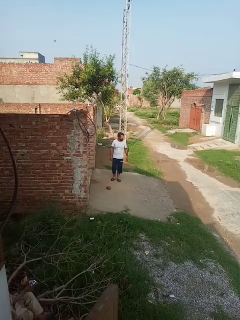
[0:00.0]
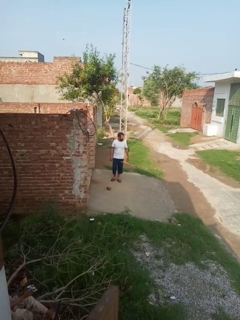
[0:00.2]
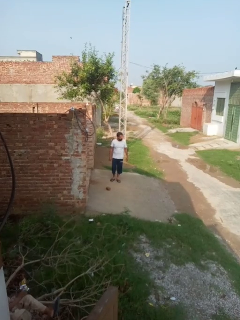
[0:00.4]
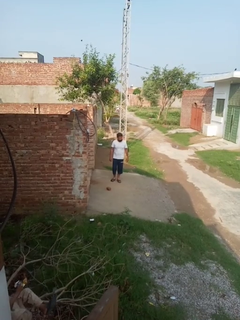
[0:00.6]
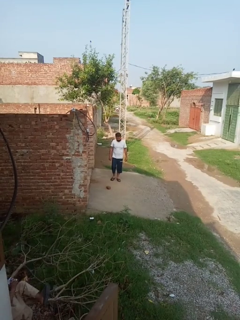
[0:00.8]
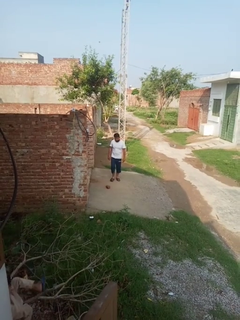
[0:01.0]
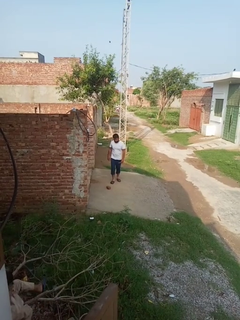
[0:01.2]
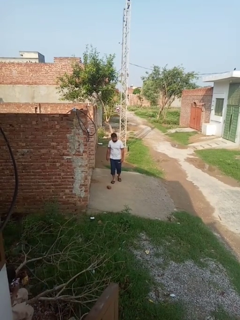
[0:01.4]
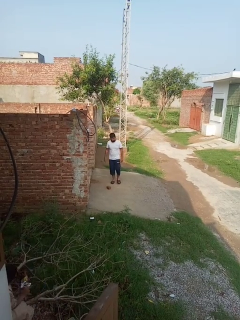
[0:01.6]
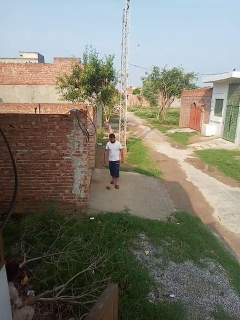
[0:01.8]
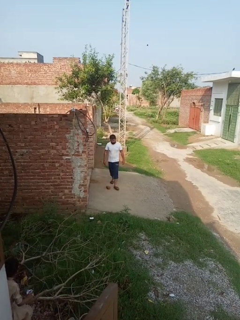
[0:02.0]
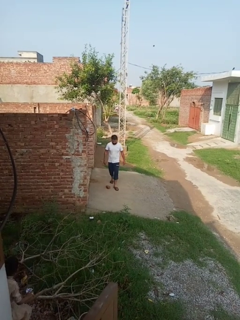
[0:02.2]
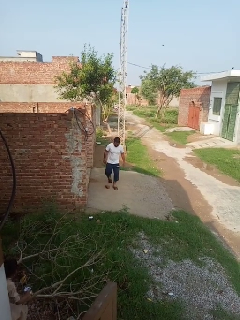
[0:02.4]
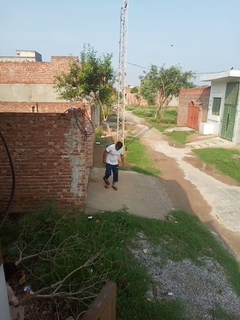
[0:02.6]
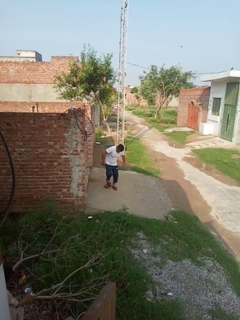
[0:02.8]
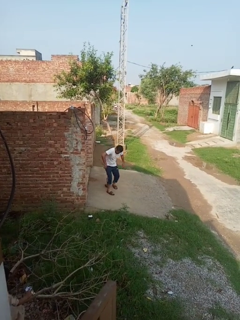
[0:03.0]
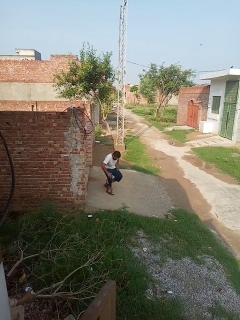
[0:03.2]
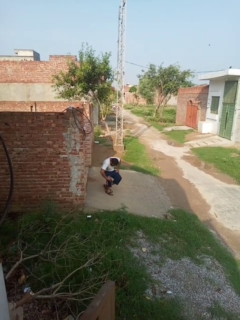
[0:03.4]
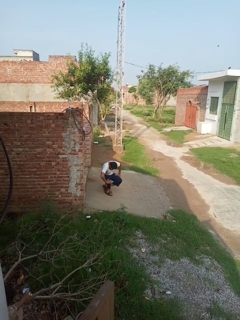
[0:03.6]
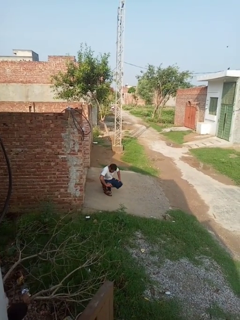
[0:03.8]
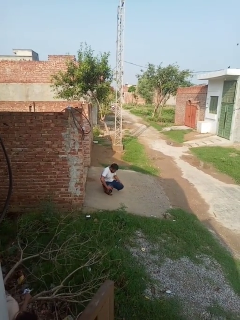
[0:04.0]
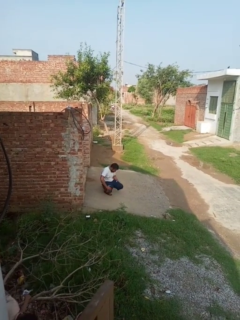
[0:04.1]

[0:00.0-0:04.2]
person trips on object on floor

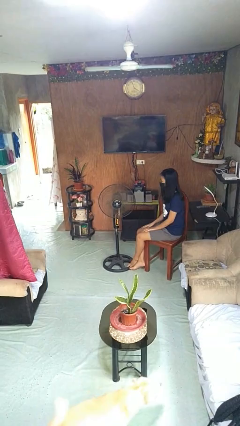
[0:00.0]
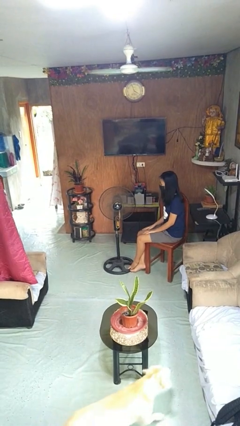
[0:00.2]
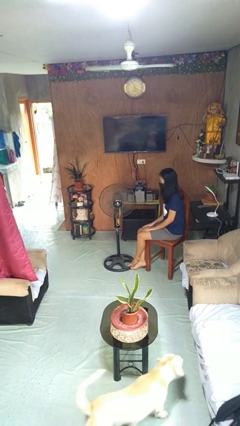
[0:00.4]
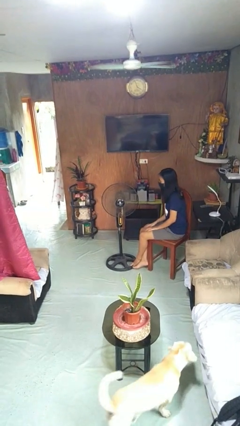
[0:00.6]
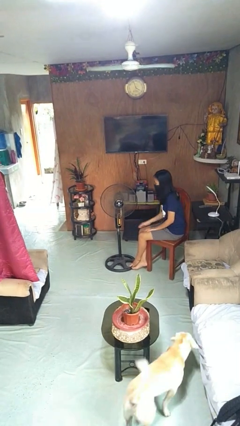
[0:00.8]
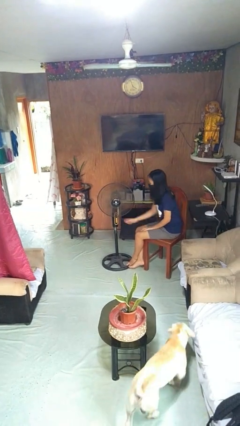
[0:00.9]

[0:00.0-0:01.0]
person turns on fan

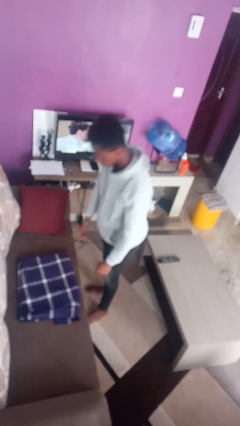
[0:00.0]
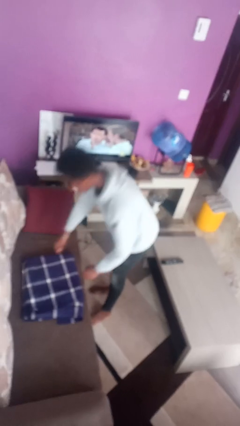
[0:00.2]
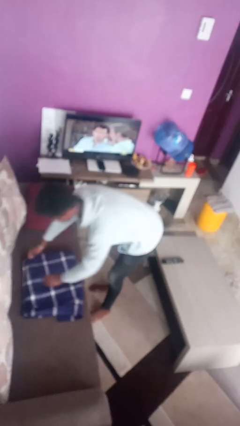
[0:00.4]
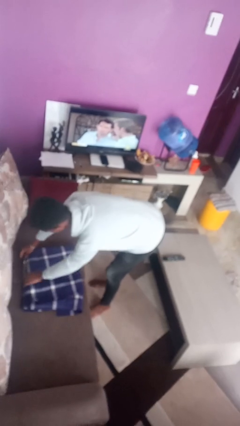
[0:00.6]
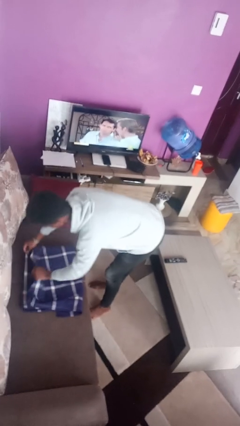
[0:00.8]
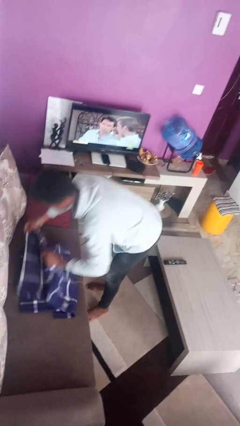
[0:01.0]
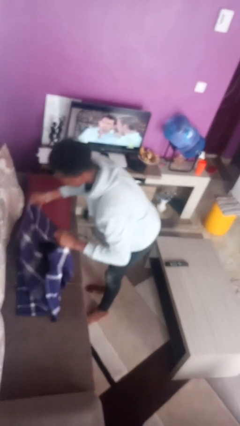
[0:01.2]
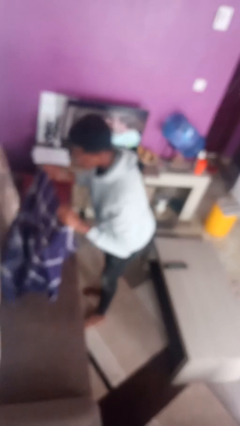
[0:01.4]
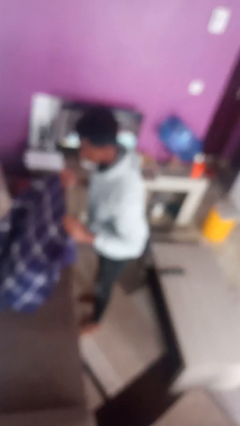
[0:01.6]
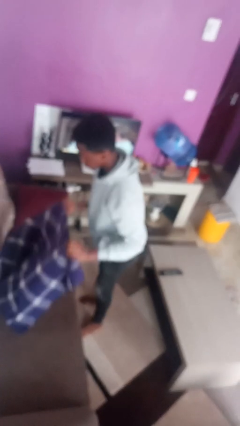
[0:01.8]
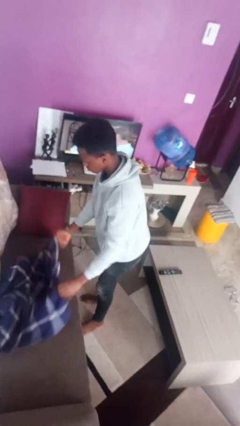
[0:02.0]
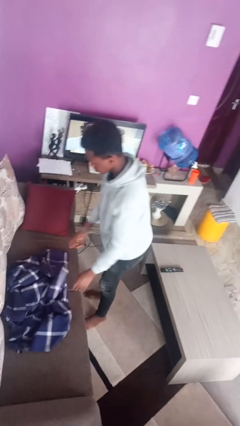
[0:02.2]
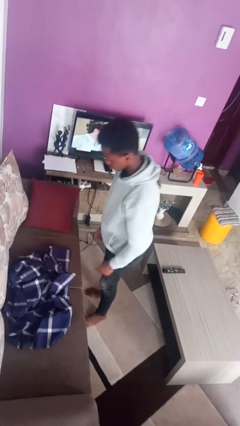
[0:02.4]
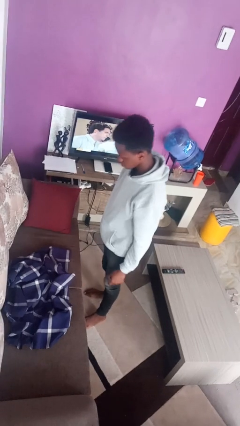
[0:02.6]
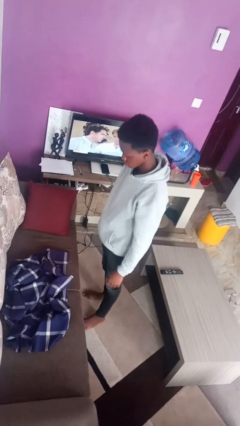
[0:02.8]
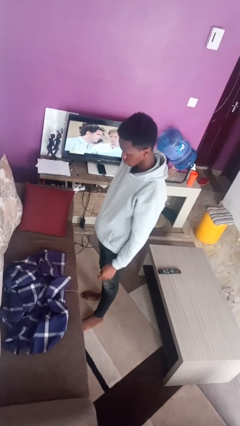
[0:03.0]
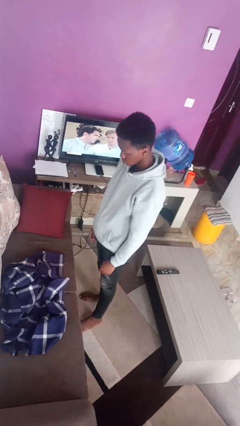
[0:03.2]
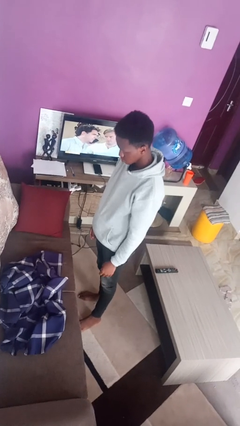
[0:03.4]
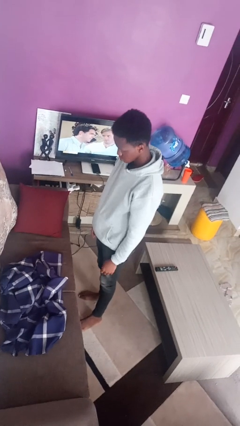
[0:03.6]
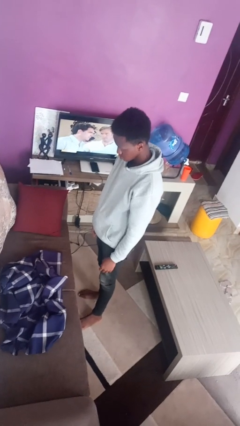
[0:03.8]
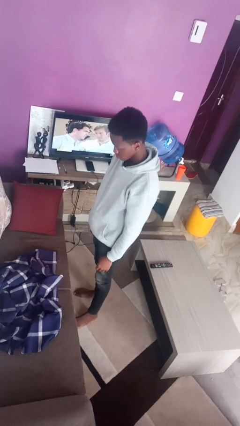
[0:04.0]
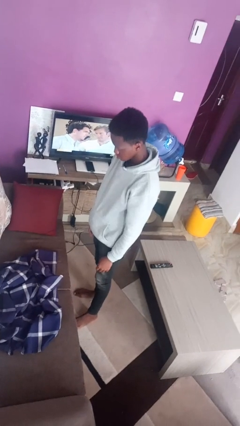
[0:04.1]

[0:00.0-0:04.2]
person unfolds blanket

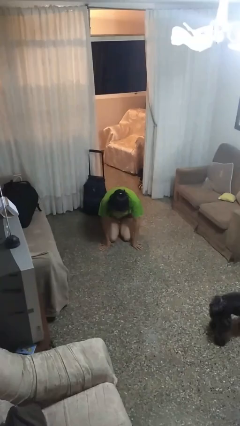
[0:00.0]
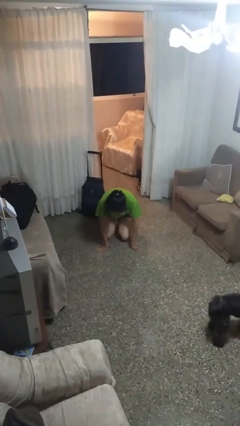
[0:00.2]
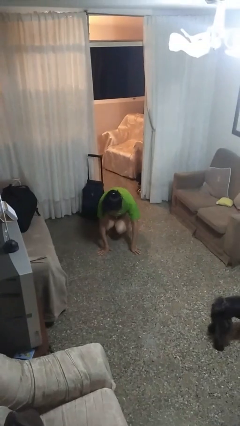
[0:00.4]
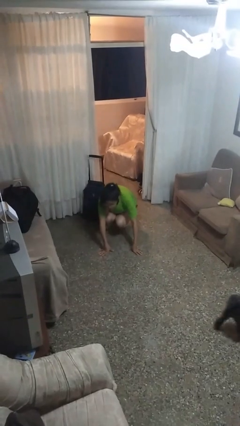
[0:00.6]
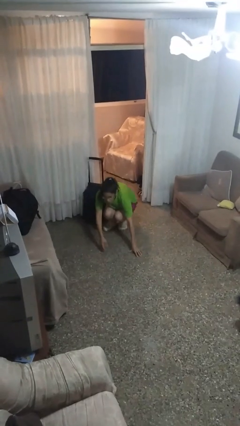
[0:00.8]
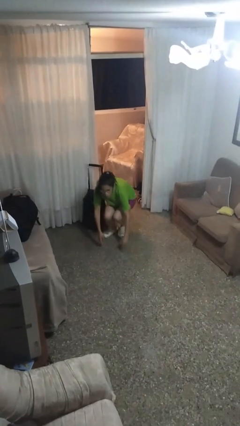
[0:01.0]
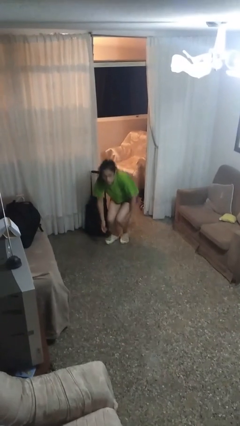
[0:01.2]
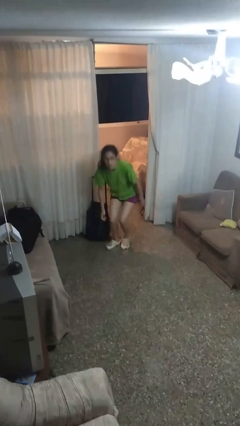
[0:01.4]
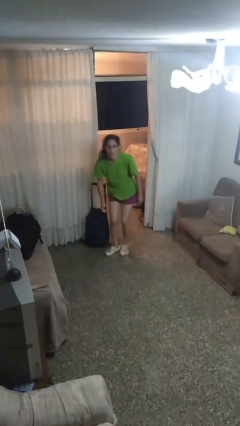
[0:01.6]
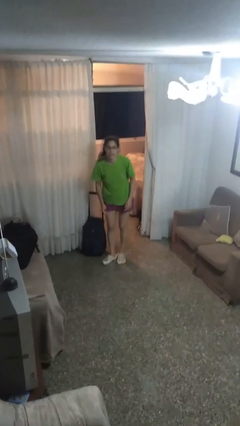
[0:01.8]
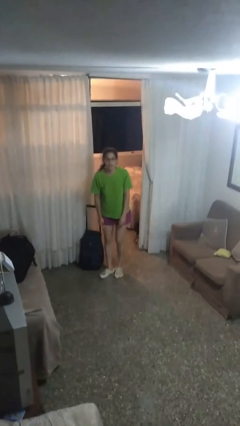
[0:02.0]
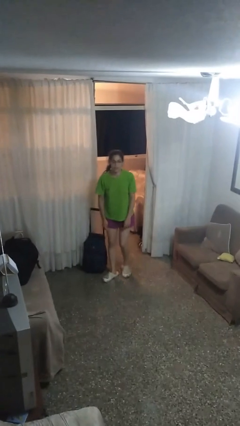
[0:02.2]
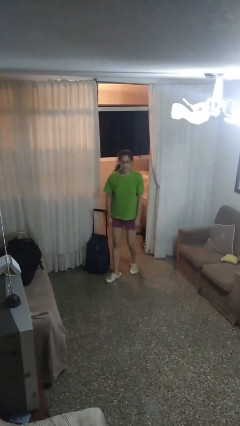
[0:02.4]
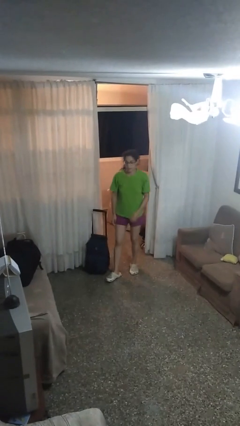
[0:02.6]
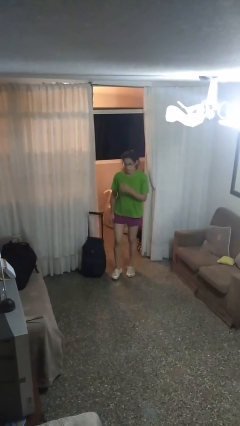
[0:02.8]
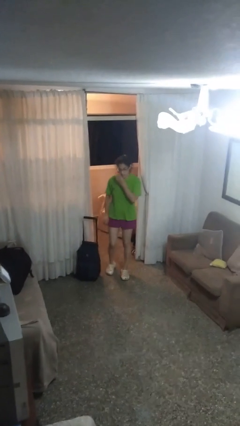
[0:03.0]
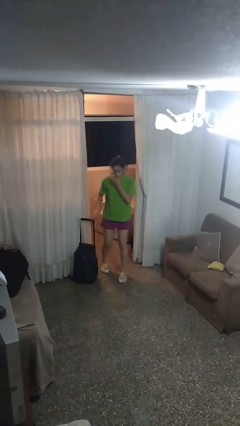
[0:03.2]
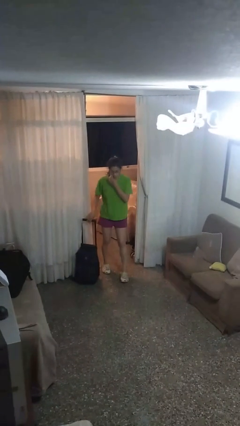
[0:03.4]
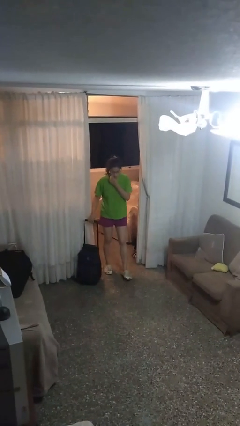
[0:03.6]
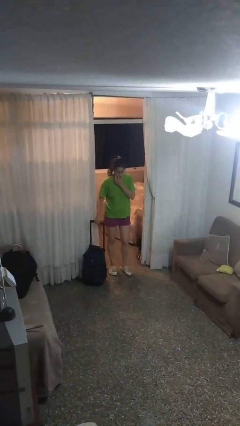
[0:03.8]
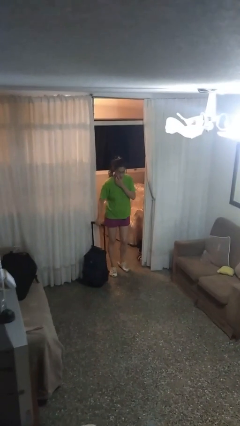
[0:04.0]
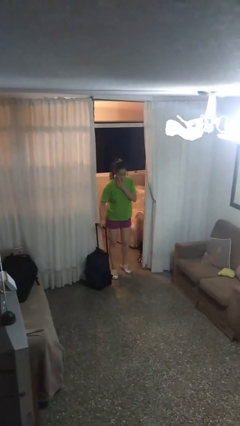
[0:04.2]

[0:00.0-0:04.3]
person stands up from floor

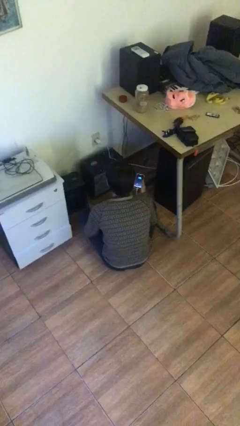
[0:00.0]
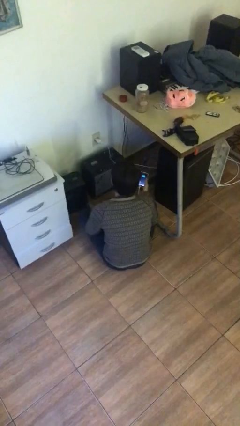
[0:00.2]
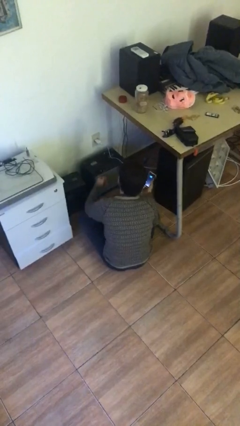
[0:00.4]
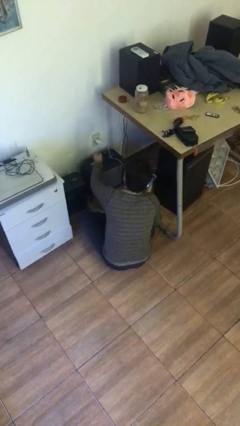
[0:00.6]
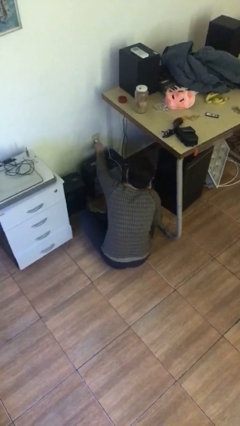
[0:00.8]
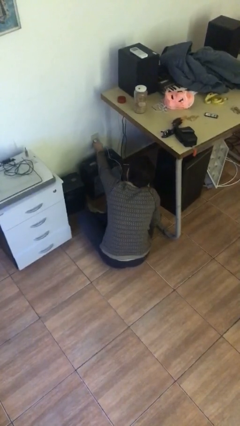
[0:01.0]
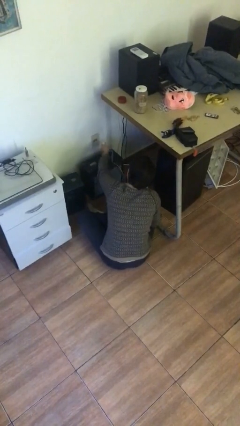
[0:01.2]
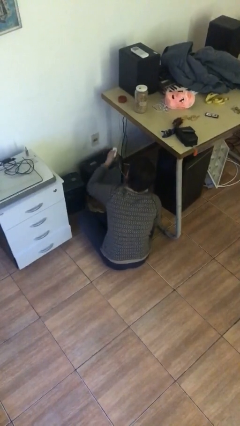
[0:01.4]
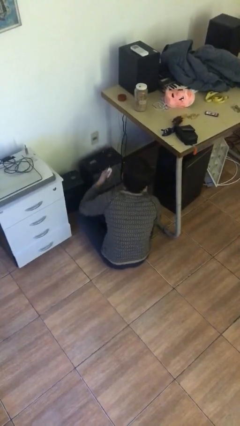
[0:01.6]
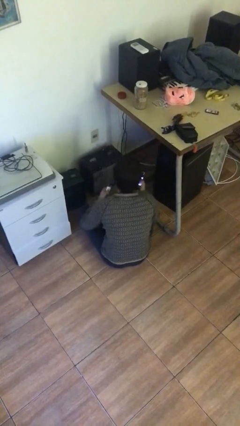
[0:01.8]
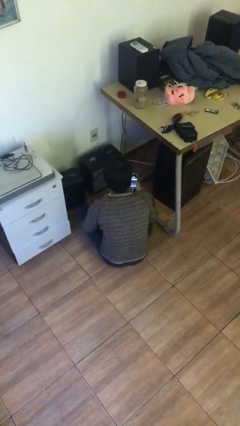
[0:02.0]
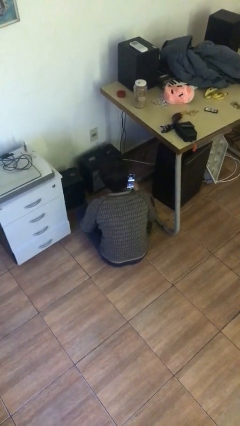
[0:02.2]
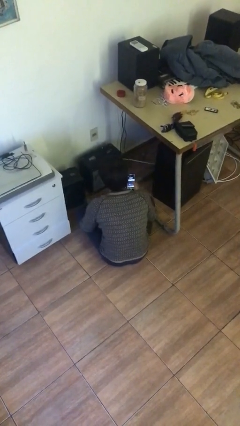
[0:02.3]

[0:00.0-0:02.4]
person unplugs from electrical socket

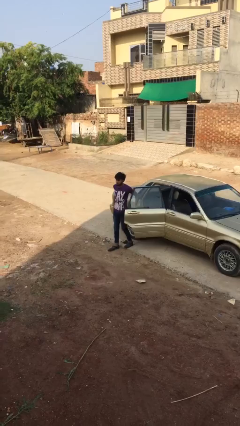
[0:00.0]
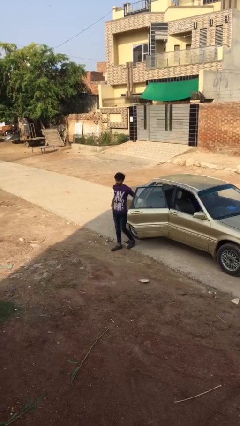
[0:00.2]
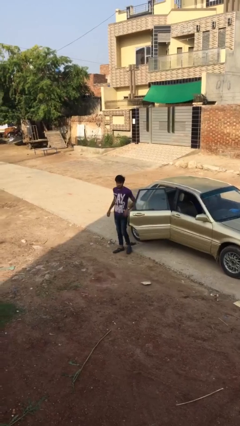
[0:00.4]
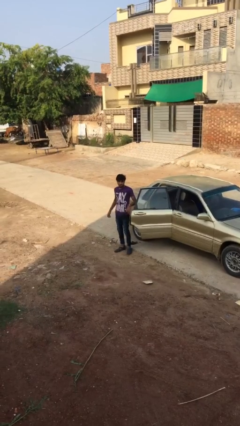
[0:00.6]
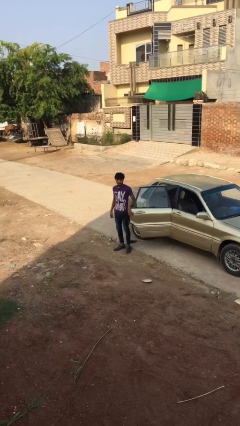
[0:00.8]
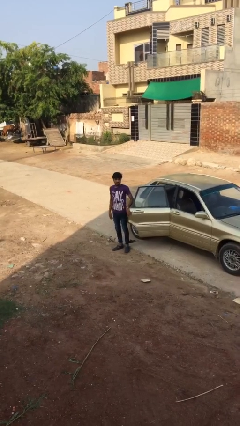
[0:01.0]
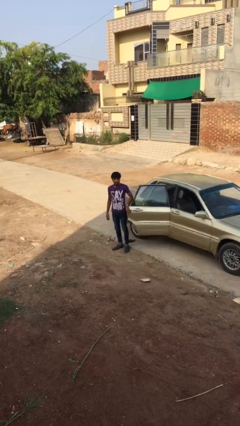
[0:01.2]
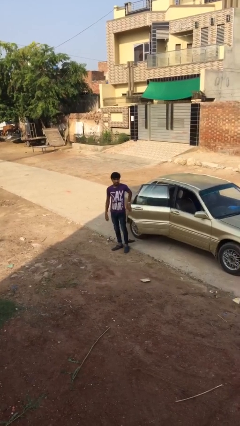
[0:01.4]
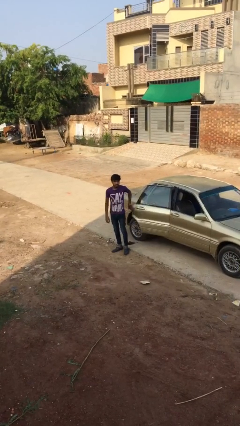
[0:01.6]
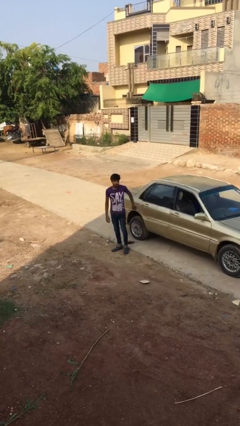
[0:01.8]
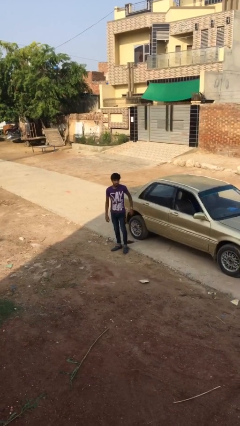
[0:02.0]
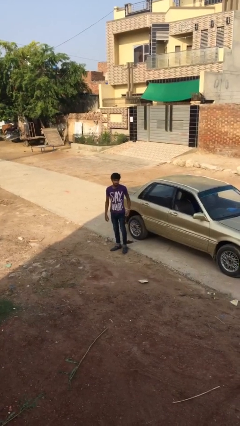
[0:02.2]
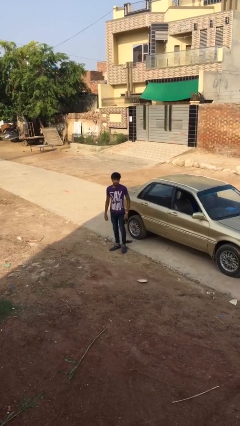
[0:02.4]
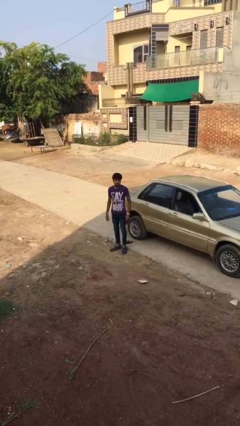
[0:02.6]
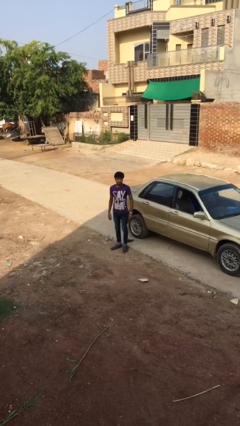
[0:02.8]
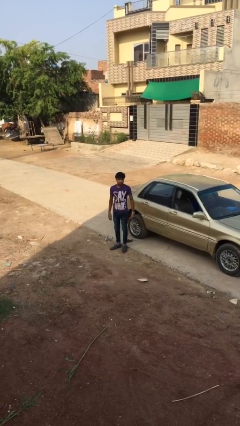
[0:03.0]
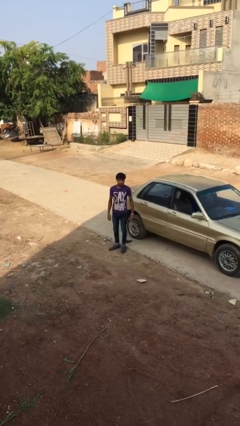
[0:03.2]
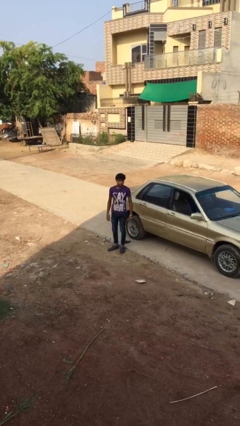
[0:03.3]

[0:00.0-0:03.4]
person closes car door
